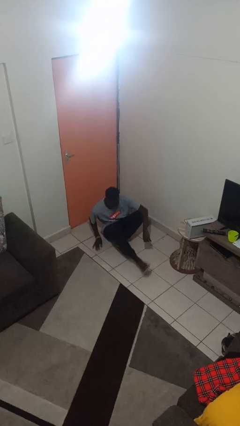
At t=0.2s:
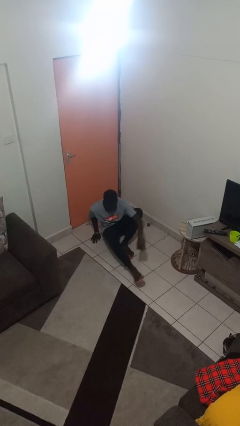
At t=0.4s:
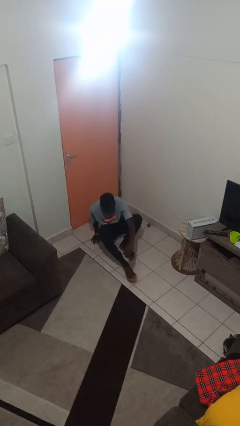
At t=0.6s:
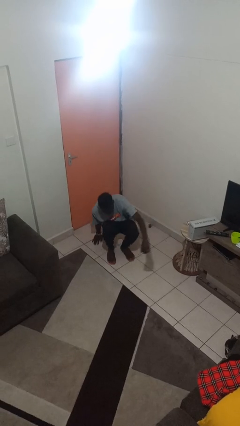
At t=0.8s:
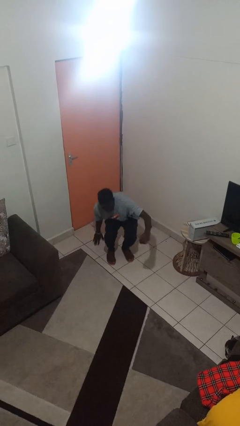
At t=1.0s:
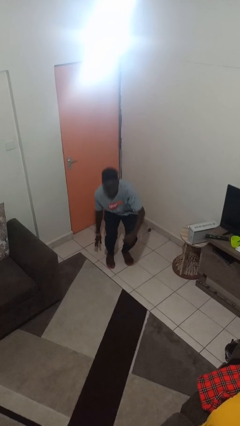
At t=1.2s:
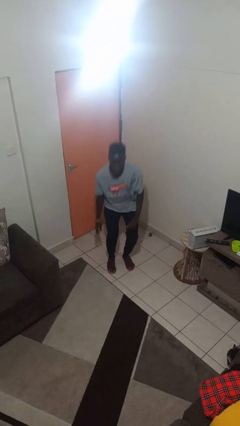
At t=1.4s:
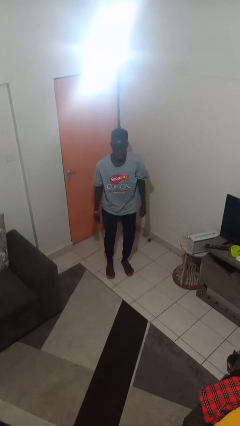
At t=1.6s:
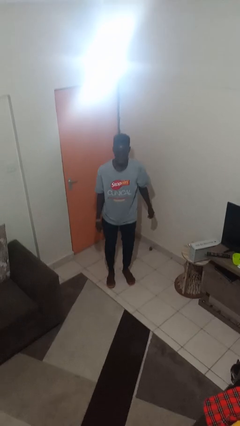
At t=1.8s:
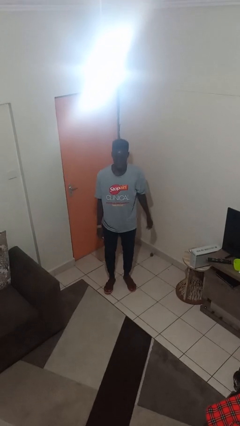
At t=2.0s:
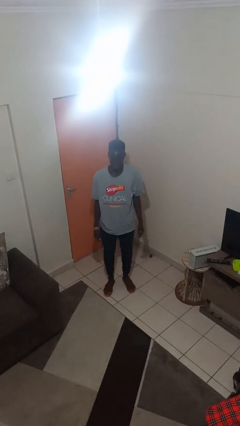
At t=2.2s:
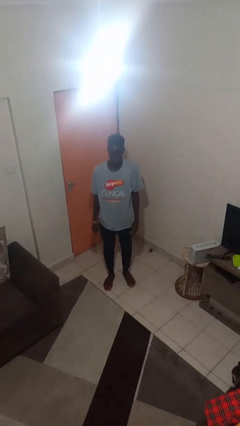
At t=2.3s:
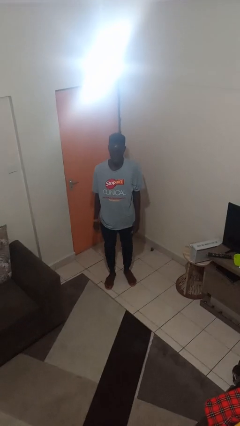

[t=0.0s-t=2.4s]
person stands up from floor

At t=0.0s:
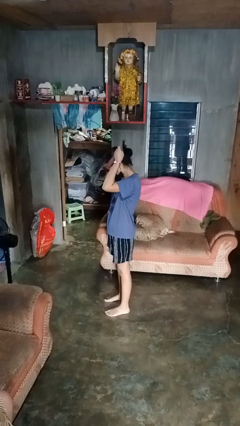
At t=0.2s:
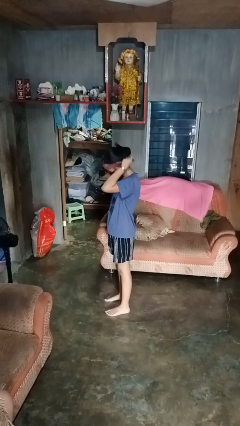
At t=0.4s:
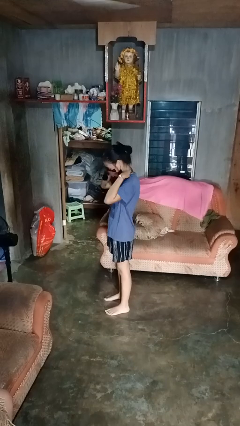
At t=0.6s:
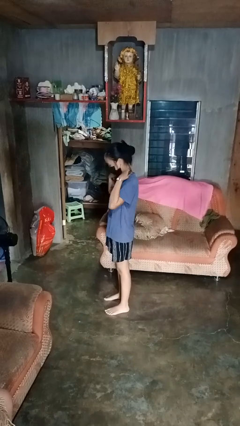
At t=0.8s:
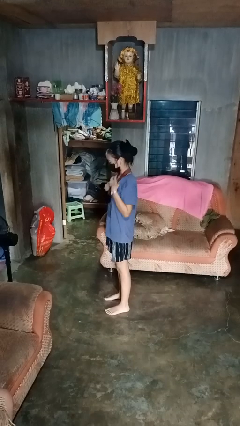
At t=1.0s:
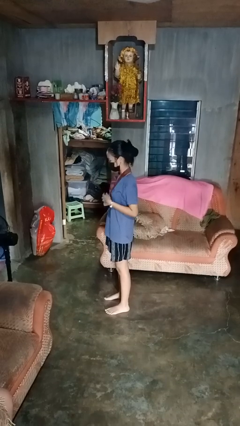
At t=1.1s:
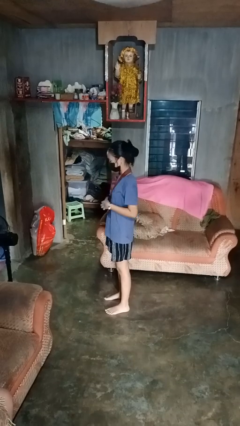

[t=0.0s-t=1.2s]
person puts on necklace

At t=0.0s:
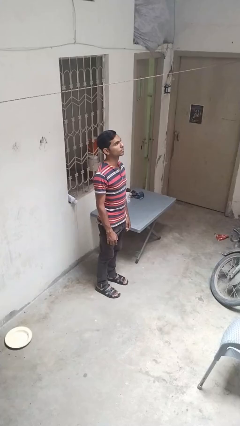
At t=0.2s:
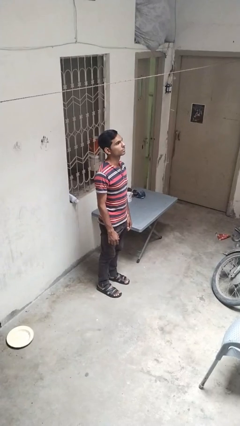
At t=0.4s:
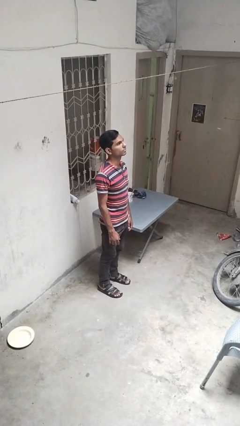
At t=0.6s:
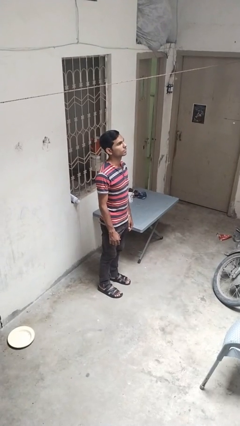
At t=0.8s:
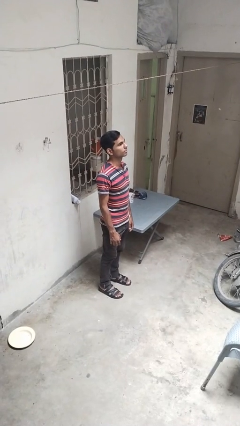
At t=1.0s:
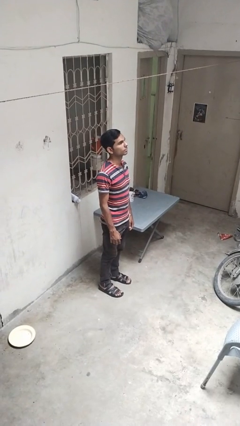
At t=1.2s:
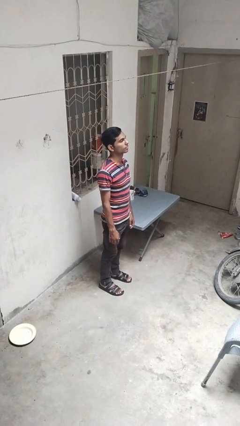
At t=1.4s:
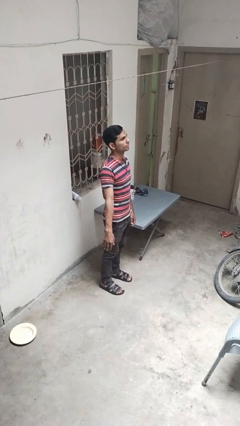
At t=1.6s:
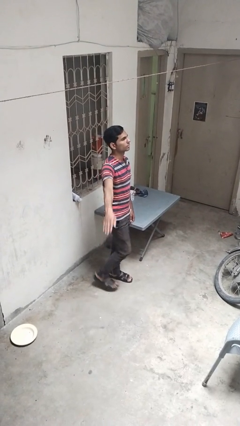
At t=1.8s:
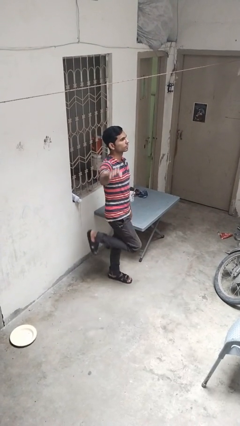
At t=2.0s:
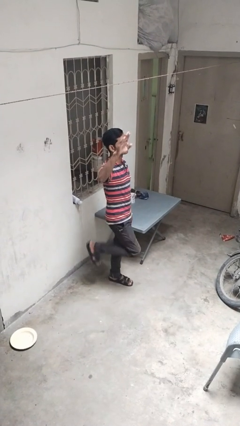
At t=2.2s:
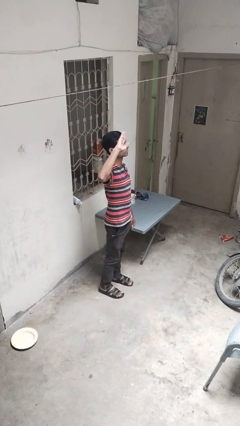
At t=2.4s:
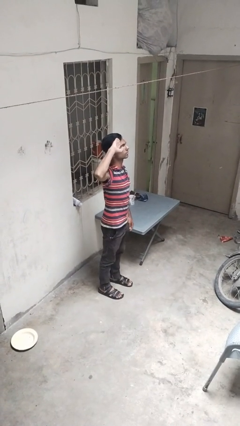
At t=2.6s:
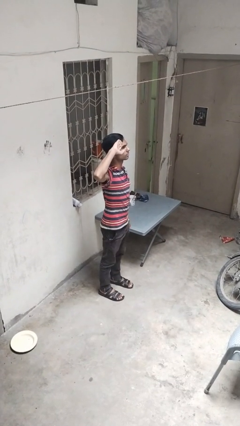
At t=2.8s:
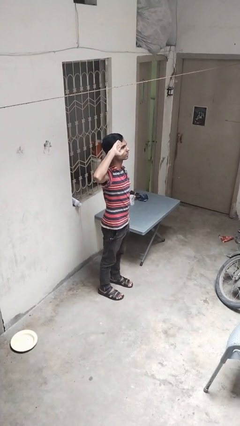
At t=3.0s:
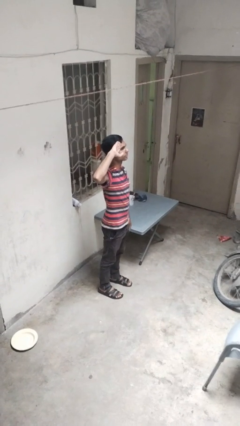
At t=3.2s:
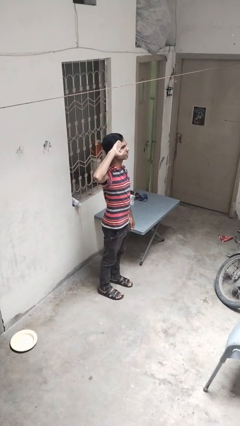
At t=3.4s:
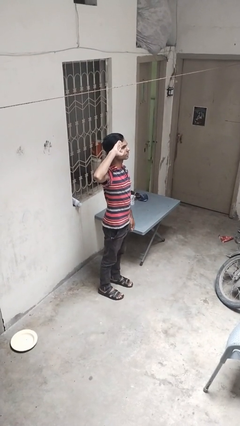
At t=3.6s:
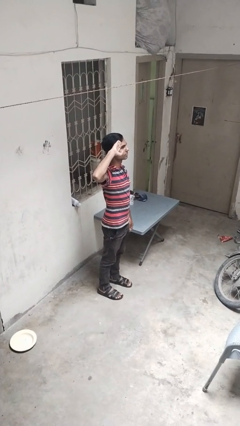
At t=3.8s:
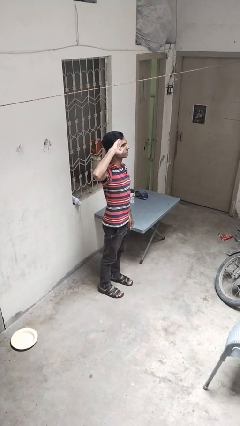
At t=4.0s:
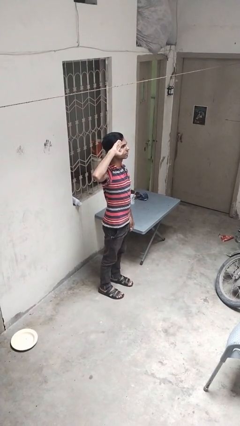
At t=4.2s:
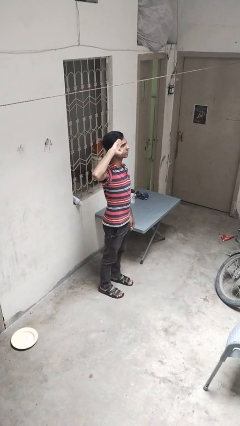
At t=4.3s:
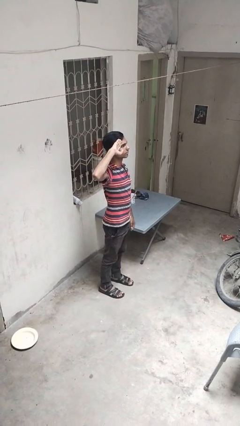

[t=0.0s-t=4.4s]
person salutes

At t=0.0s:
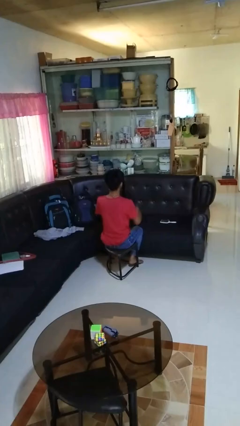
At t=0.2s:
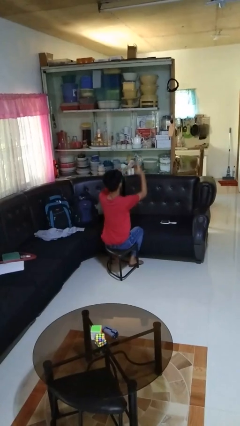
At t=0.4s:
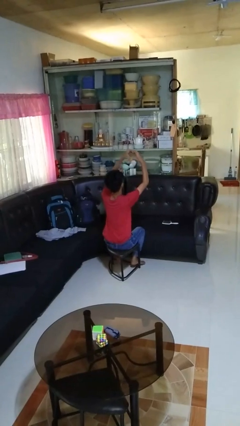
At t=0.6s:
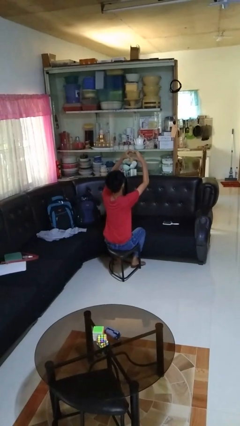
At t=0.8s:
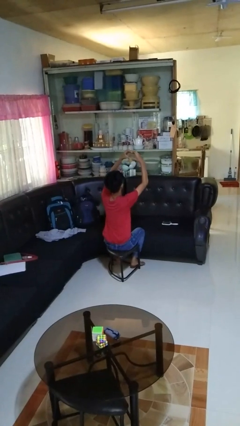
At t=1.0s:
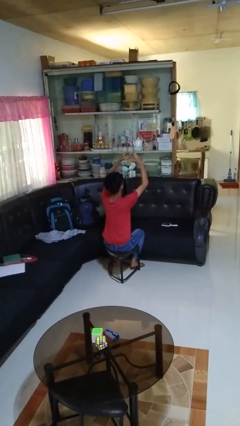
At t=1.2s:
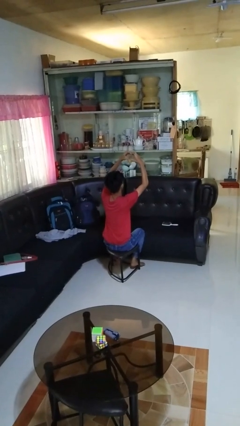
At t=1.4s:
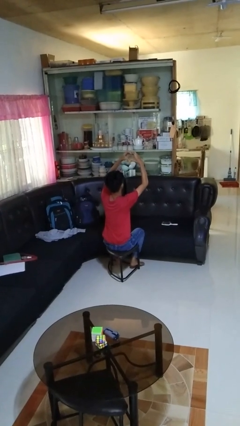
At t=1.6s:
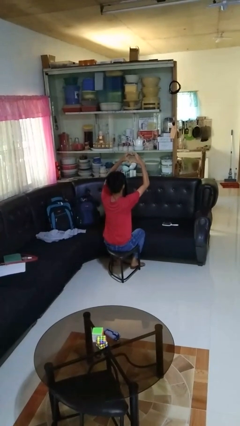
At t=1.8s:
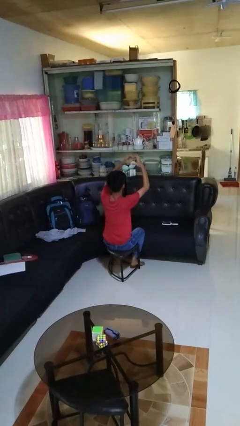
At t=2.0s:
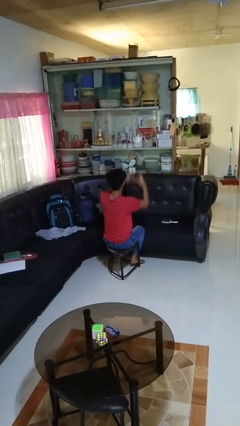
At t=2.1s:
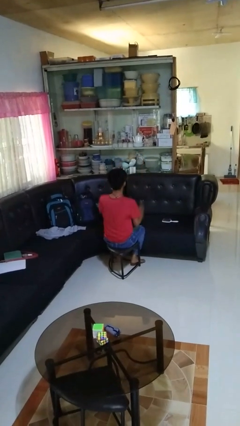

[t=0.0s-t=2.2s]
person gestures heart

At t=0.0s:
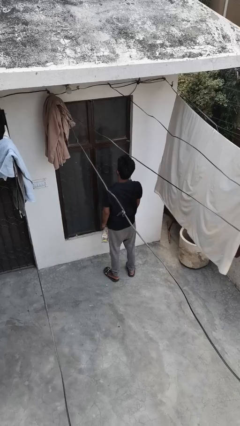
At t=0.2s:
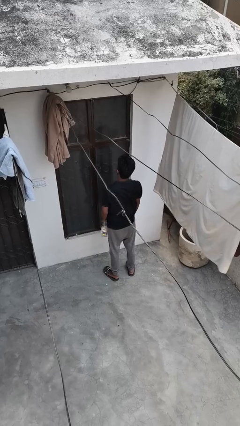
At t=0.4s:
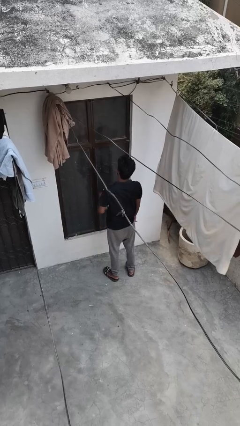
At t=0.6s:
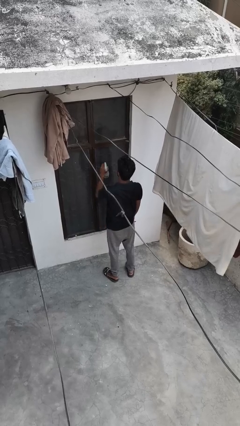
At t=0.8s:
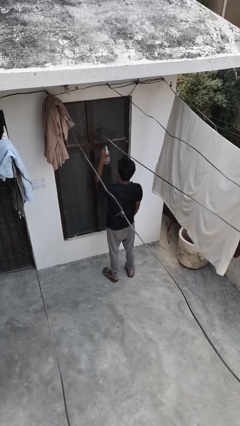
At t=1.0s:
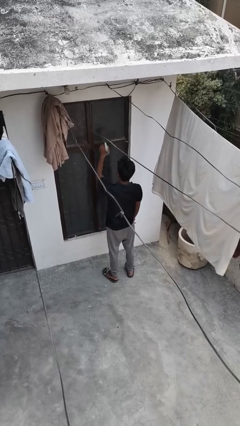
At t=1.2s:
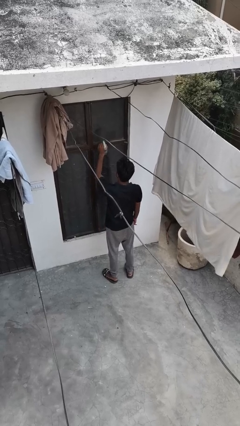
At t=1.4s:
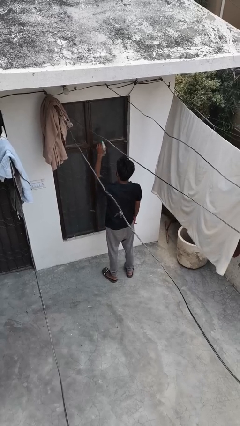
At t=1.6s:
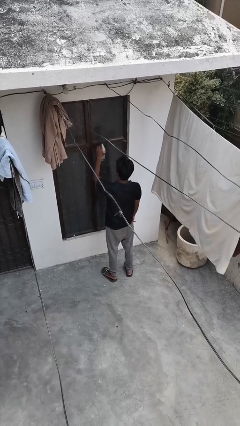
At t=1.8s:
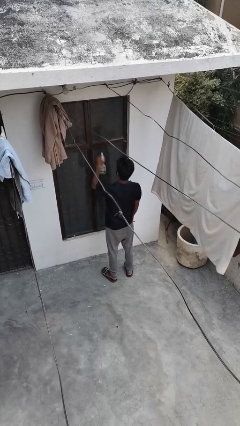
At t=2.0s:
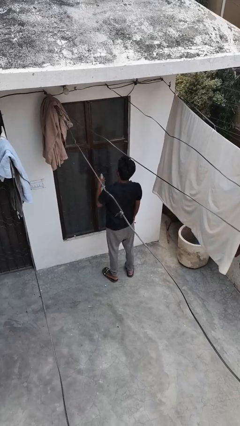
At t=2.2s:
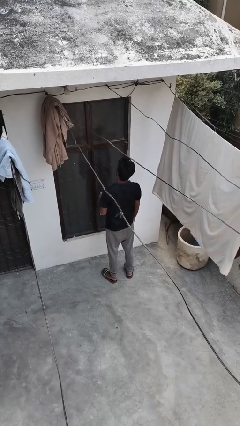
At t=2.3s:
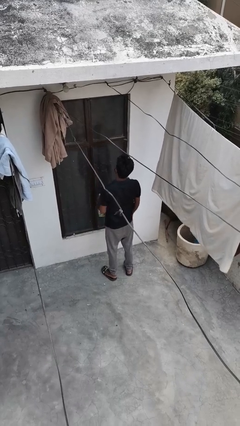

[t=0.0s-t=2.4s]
person sprays from bottle

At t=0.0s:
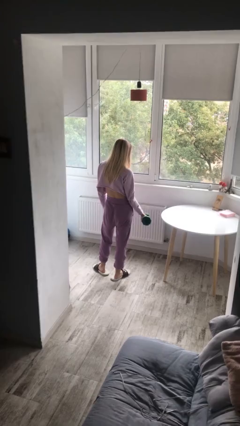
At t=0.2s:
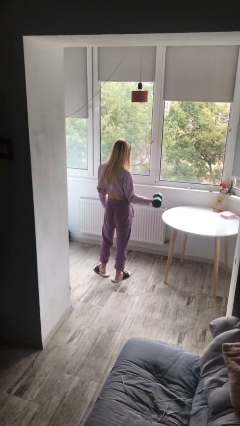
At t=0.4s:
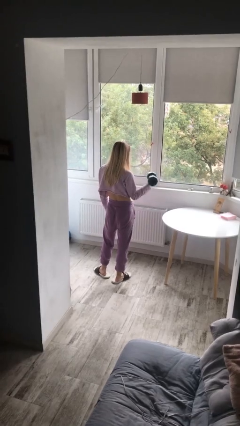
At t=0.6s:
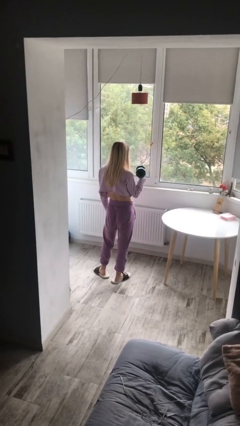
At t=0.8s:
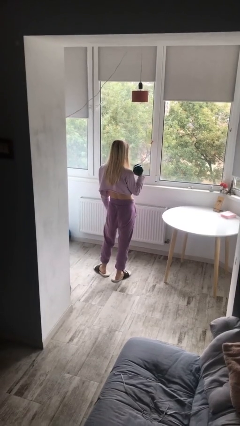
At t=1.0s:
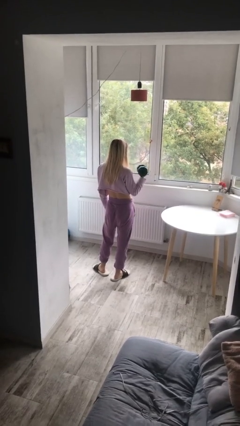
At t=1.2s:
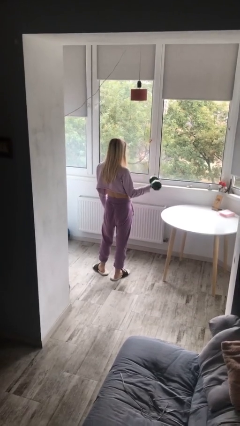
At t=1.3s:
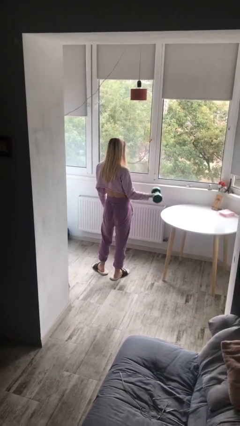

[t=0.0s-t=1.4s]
person lifts dumbbells

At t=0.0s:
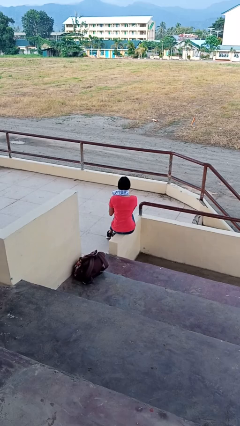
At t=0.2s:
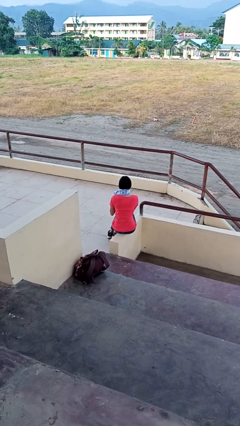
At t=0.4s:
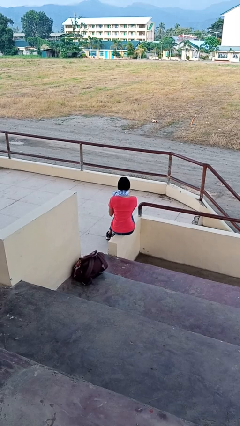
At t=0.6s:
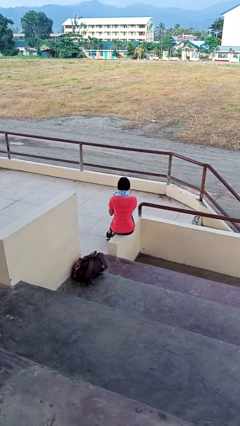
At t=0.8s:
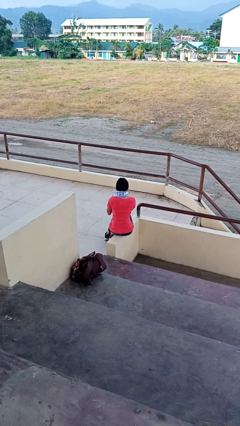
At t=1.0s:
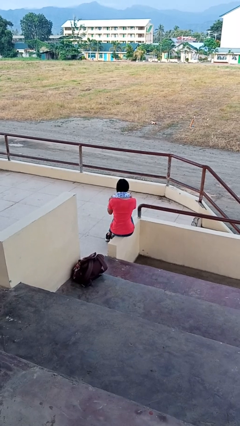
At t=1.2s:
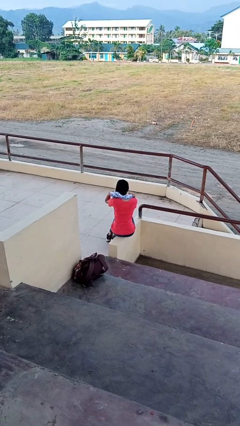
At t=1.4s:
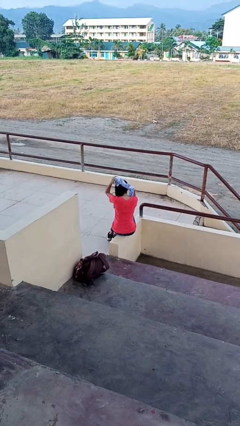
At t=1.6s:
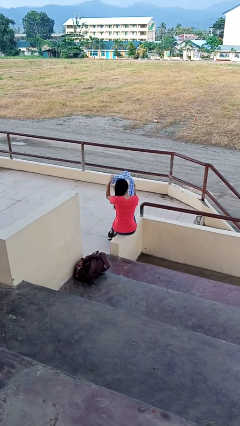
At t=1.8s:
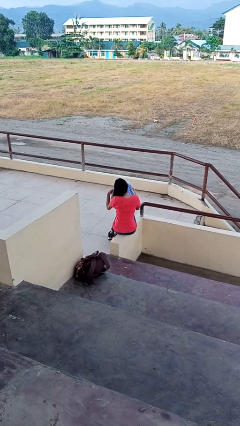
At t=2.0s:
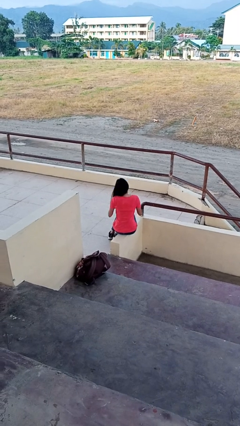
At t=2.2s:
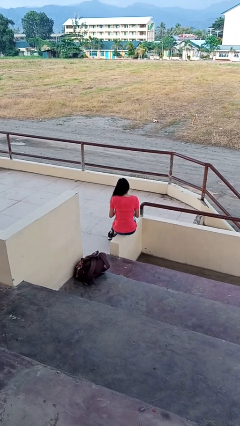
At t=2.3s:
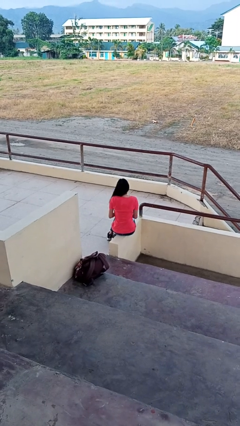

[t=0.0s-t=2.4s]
person takes off scarf

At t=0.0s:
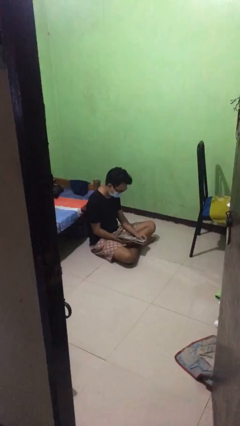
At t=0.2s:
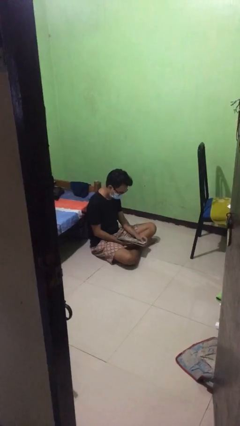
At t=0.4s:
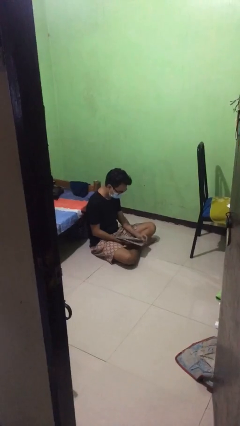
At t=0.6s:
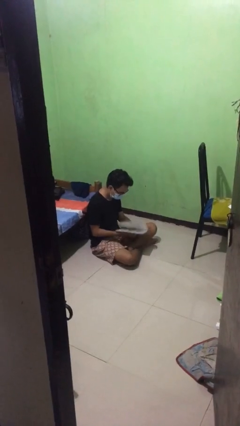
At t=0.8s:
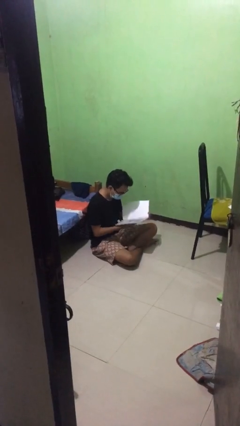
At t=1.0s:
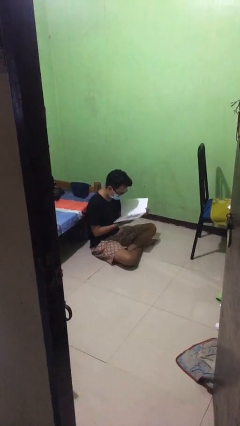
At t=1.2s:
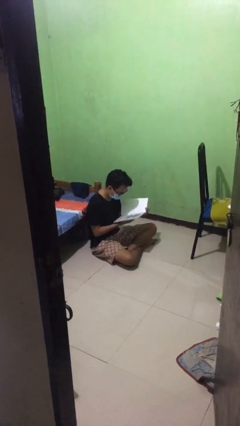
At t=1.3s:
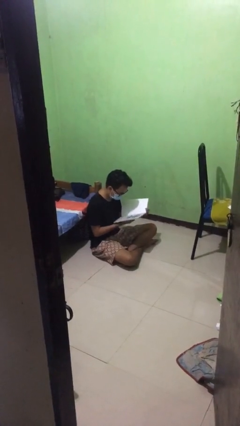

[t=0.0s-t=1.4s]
person reads document
